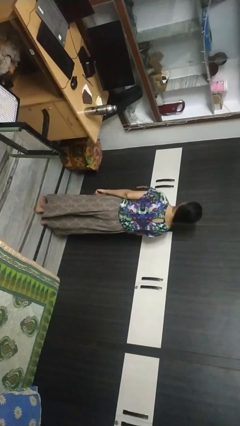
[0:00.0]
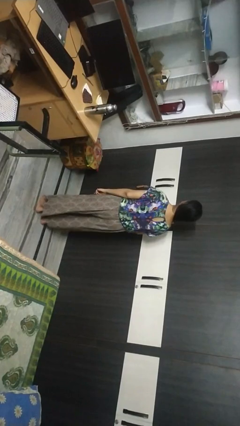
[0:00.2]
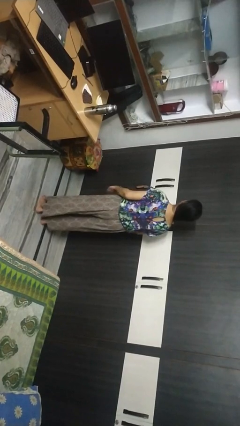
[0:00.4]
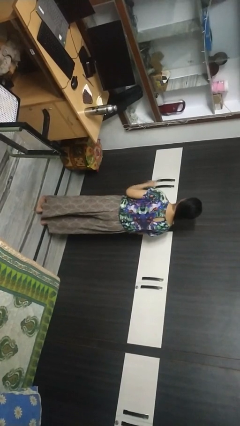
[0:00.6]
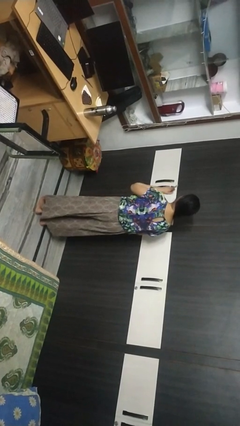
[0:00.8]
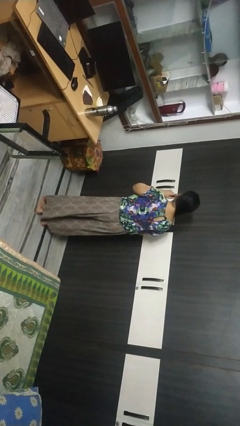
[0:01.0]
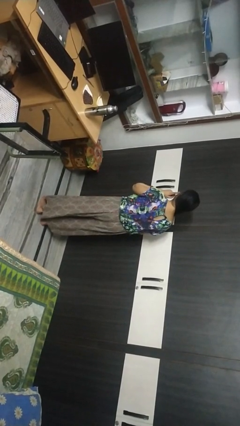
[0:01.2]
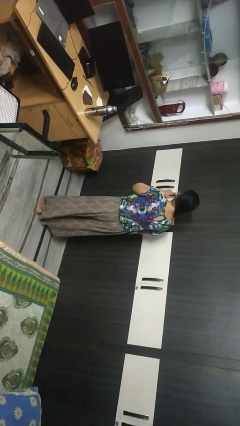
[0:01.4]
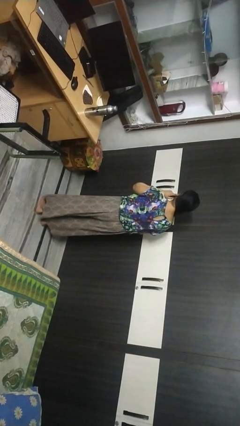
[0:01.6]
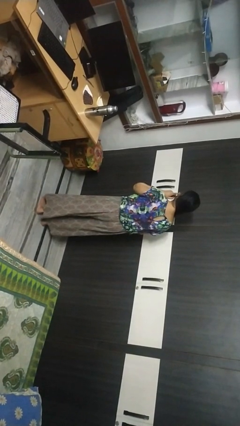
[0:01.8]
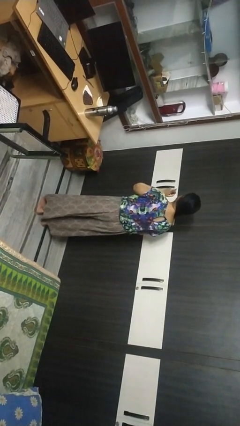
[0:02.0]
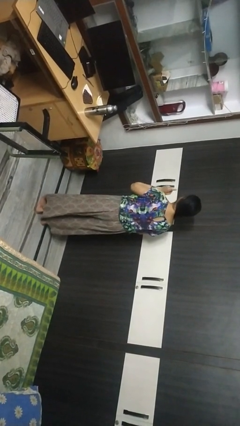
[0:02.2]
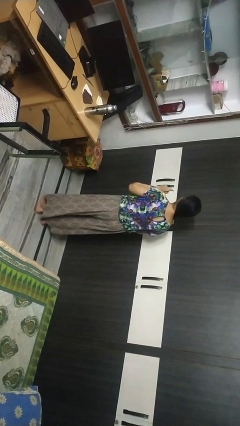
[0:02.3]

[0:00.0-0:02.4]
person gestures listen closely

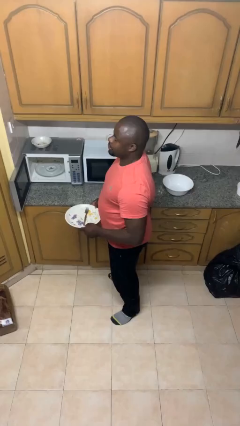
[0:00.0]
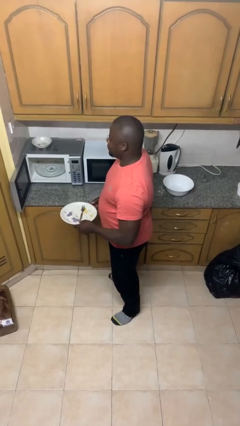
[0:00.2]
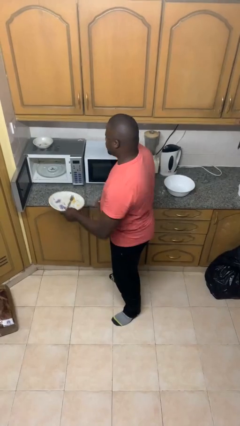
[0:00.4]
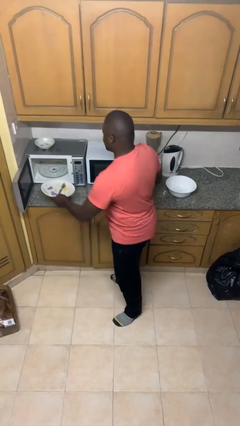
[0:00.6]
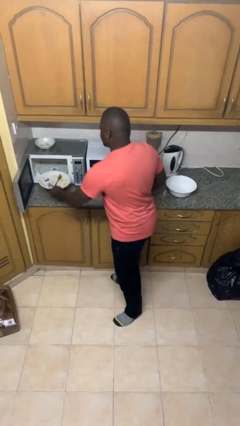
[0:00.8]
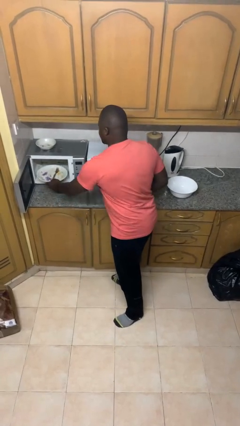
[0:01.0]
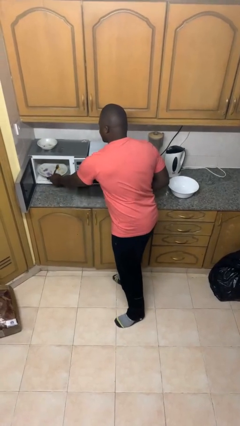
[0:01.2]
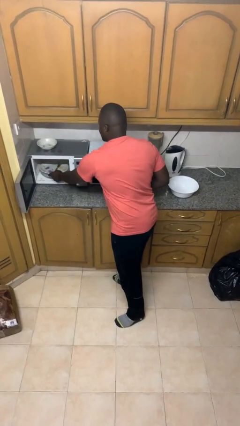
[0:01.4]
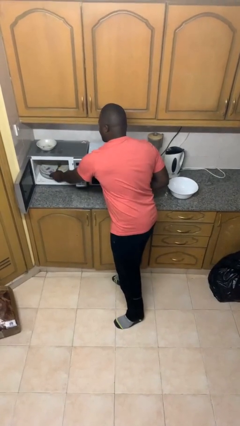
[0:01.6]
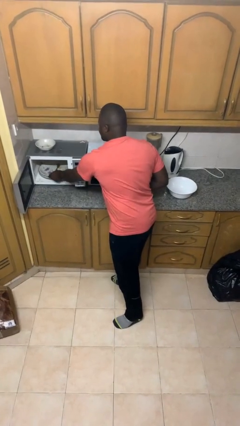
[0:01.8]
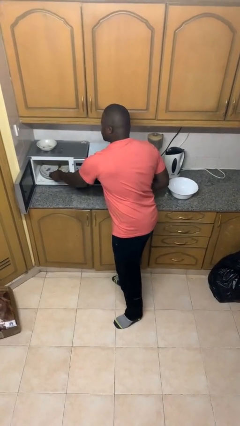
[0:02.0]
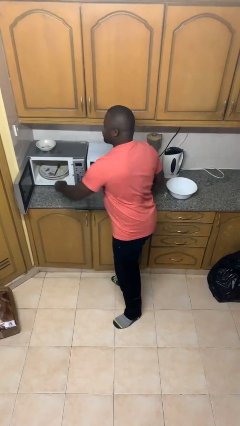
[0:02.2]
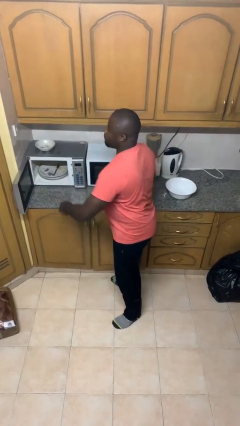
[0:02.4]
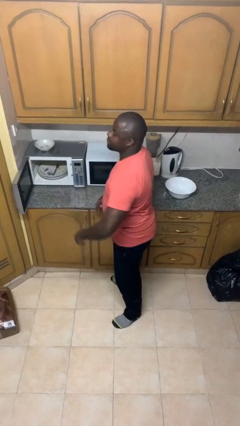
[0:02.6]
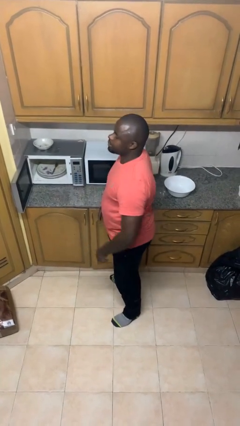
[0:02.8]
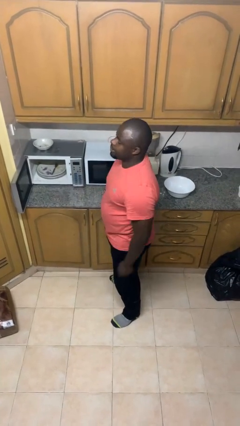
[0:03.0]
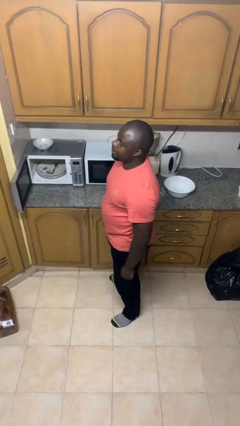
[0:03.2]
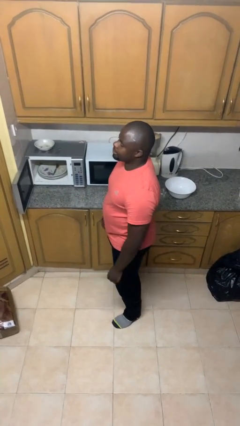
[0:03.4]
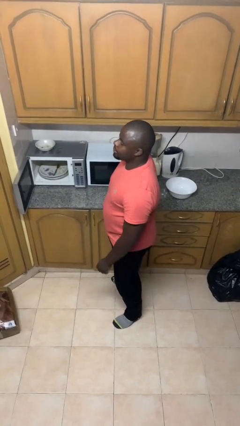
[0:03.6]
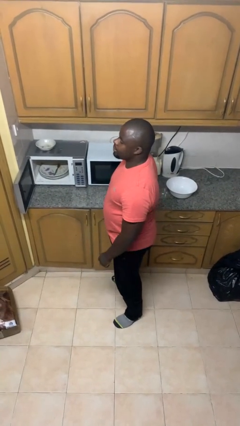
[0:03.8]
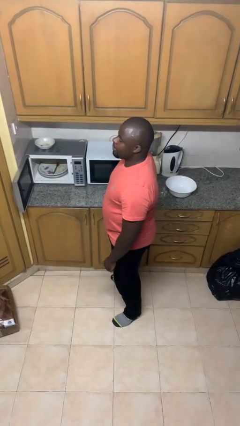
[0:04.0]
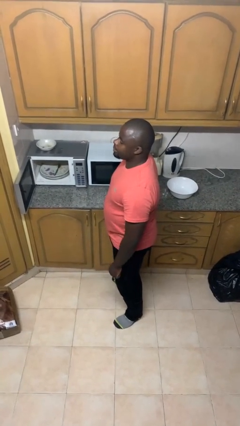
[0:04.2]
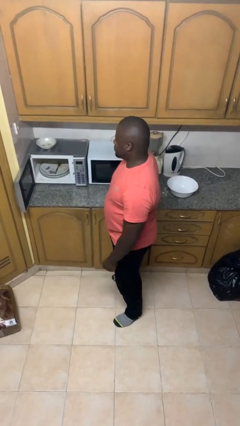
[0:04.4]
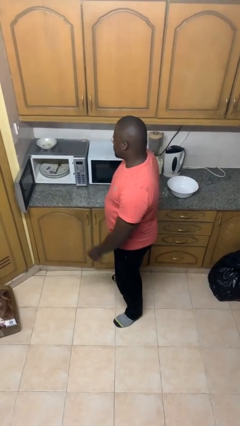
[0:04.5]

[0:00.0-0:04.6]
person puts object into microwave

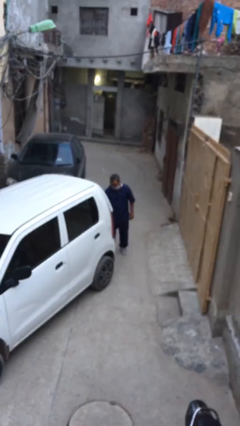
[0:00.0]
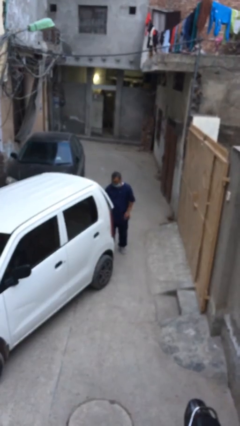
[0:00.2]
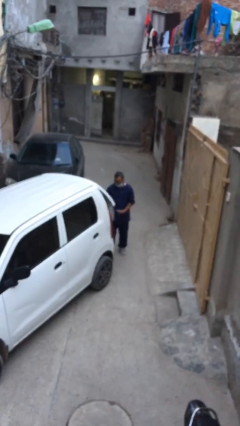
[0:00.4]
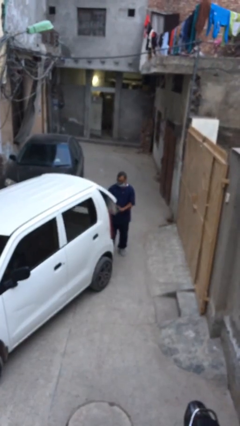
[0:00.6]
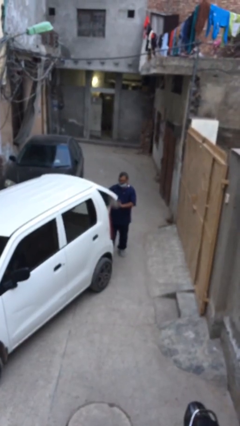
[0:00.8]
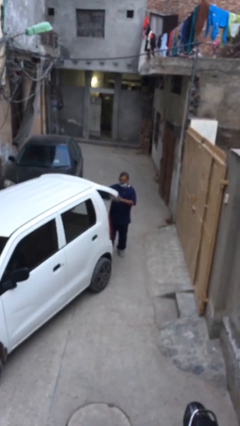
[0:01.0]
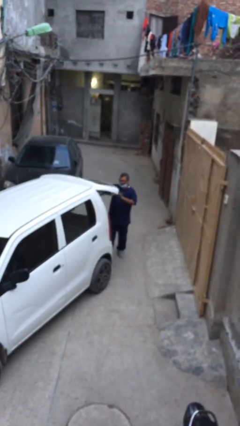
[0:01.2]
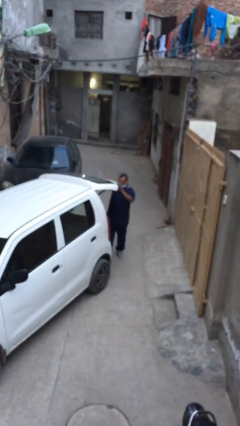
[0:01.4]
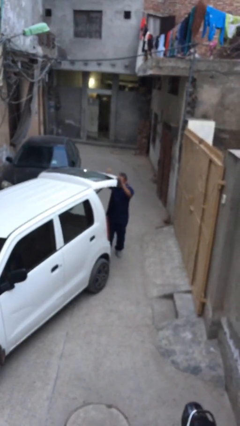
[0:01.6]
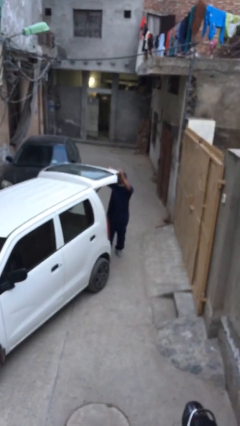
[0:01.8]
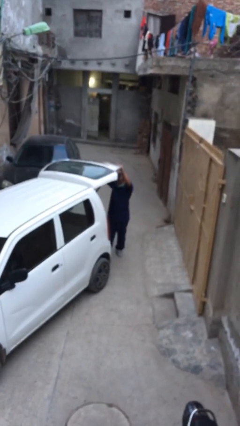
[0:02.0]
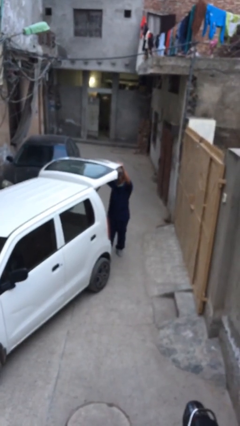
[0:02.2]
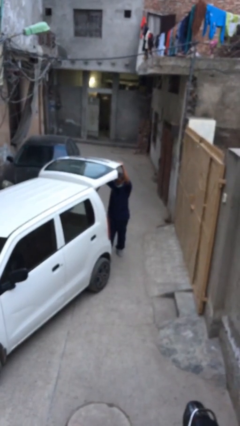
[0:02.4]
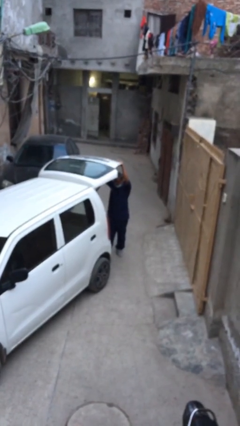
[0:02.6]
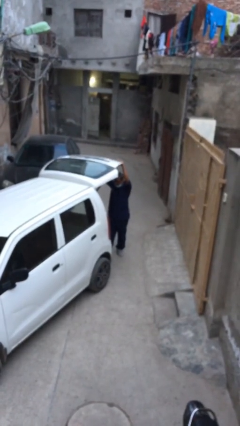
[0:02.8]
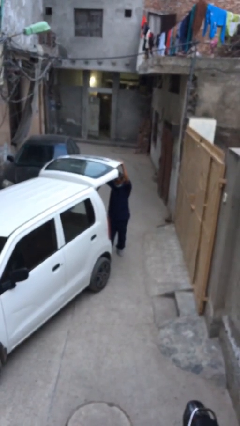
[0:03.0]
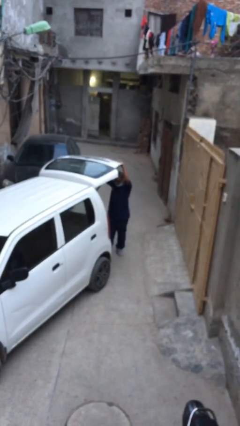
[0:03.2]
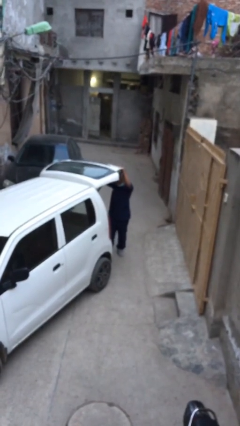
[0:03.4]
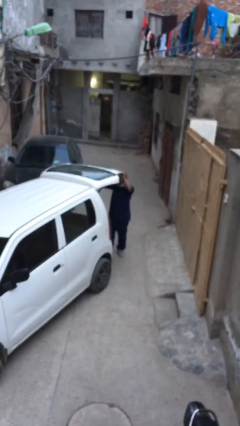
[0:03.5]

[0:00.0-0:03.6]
person opens car trunk

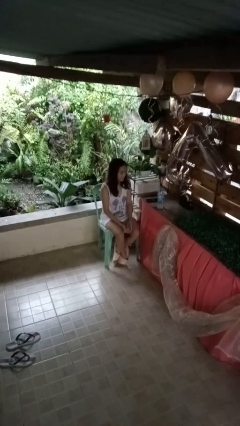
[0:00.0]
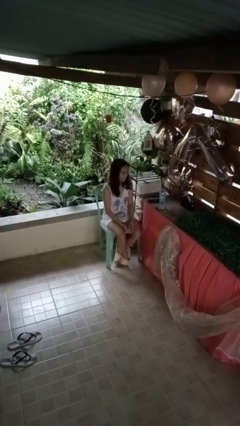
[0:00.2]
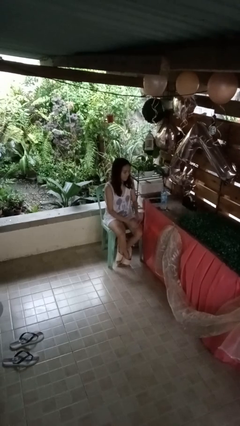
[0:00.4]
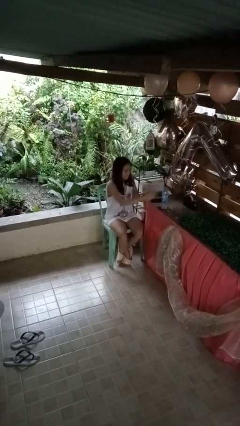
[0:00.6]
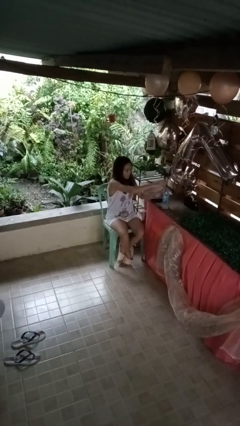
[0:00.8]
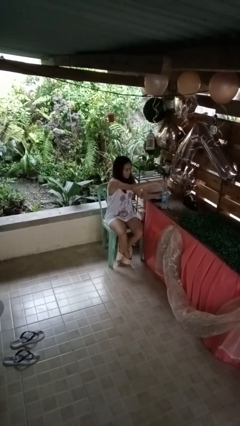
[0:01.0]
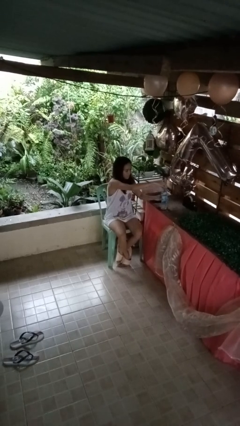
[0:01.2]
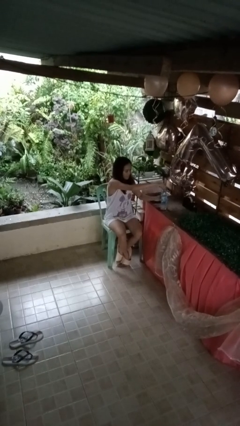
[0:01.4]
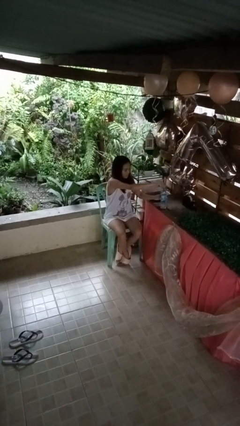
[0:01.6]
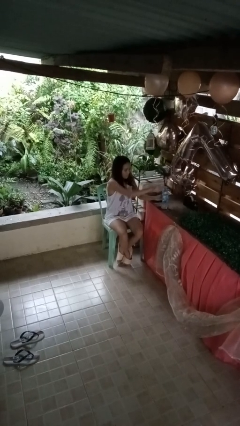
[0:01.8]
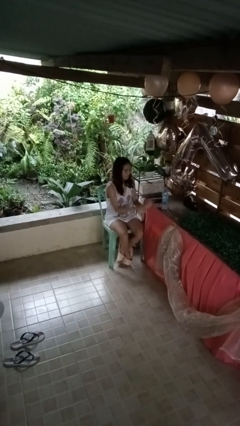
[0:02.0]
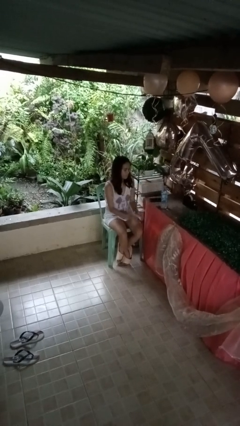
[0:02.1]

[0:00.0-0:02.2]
person screws lid to bottle

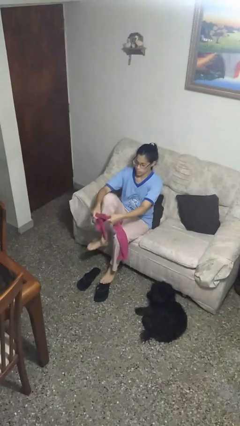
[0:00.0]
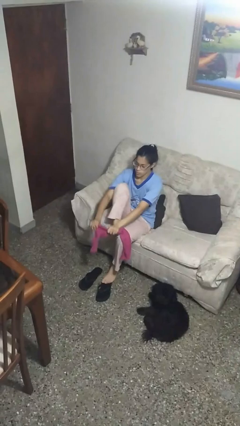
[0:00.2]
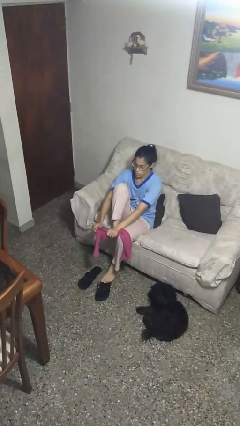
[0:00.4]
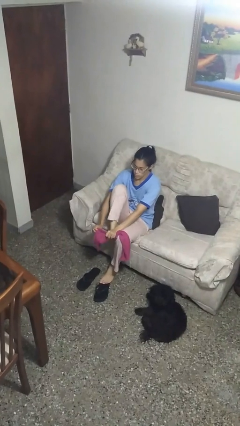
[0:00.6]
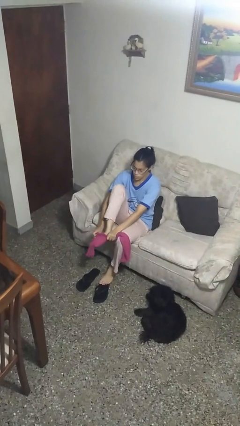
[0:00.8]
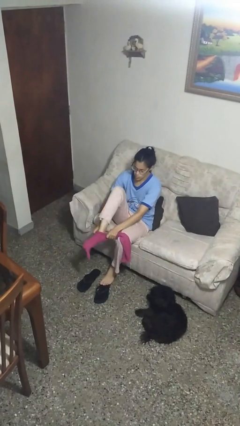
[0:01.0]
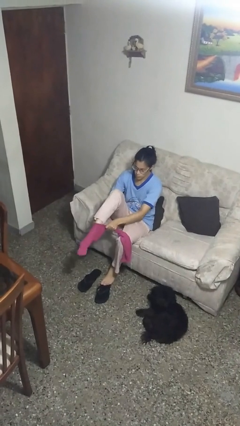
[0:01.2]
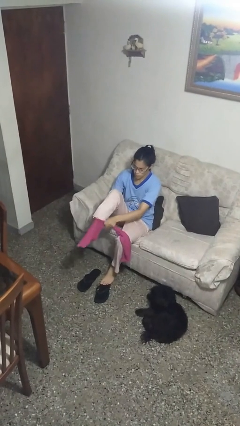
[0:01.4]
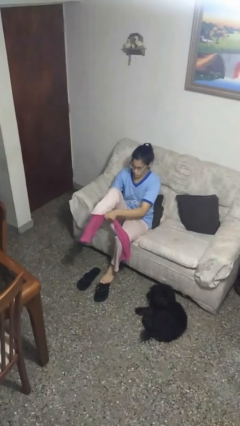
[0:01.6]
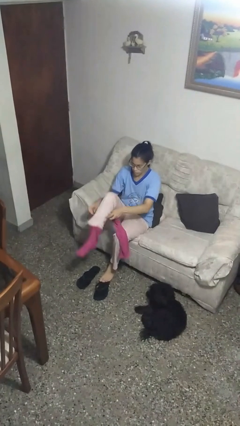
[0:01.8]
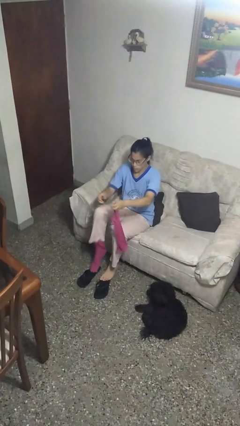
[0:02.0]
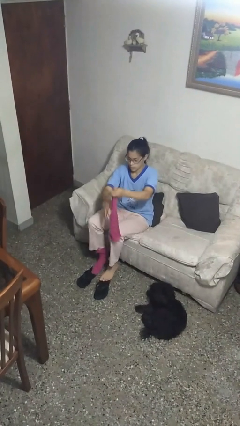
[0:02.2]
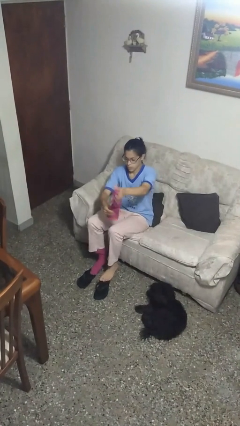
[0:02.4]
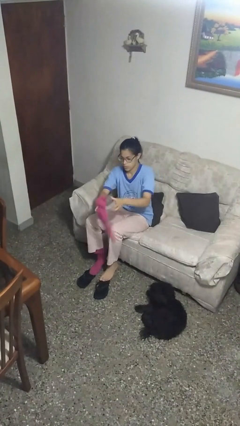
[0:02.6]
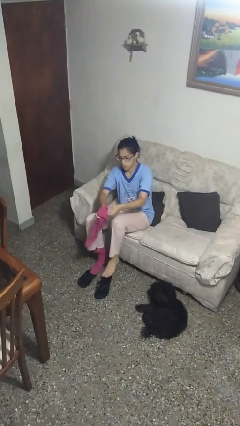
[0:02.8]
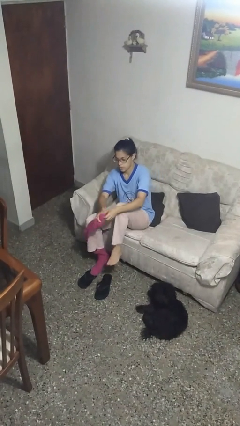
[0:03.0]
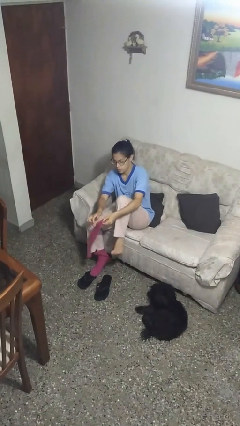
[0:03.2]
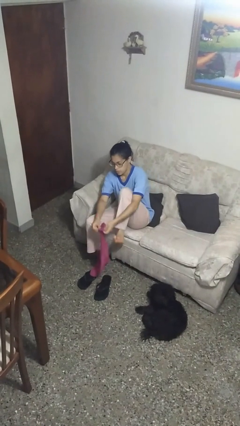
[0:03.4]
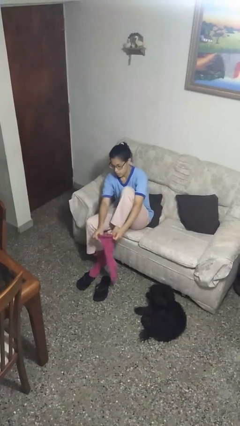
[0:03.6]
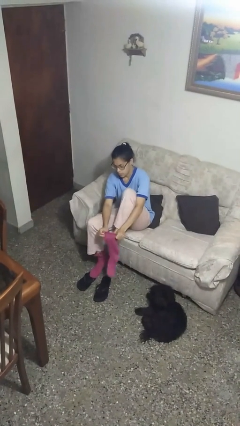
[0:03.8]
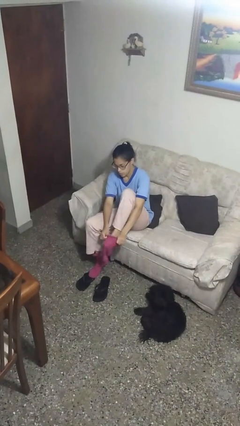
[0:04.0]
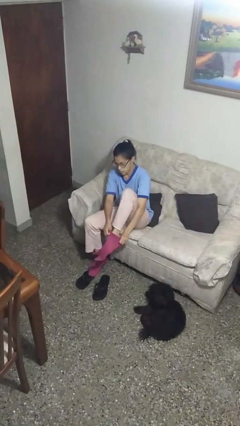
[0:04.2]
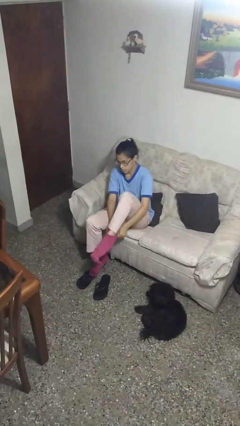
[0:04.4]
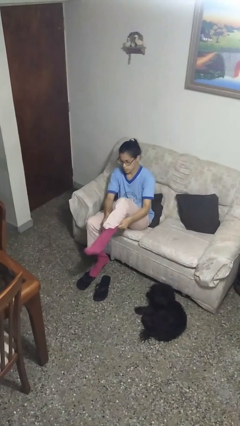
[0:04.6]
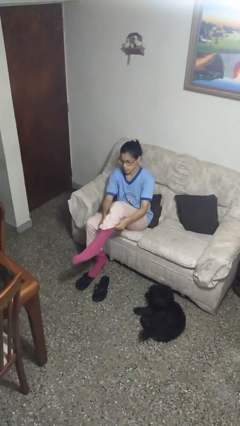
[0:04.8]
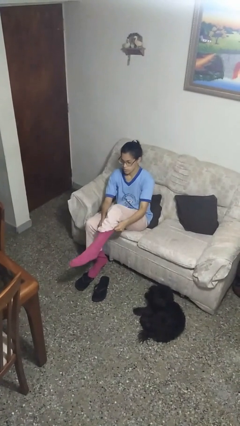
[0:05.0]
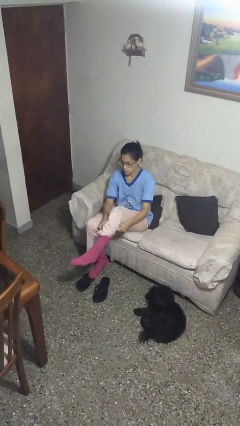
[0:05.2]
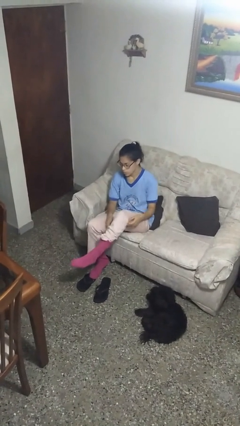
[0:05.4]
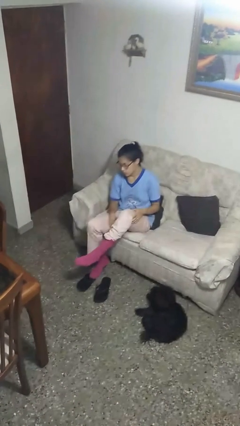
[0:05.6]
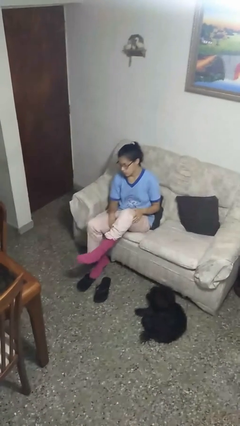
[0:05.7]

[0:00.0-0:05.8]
person puts on socks
